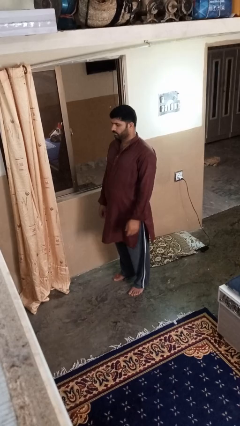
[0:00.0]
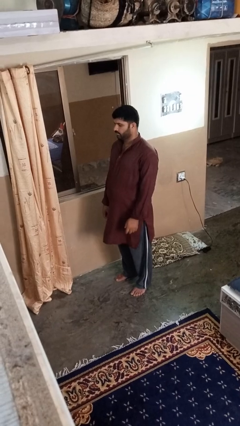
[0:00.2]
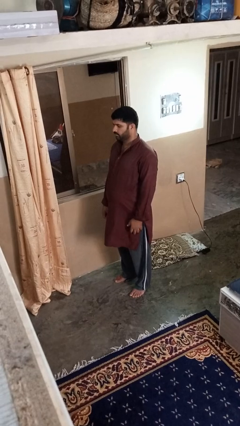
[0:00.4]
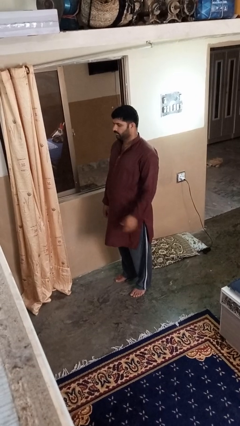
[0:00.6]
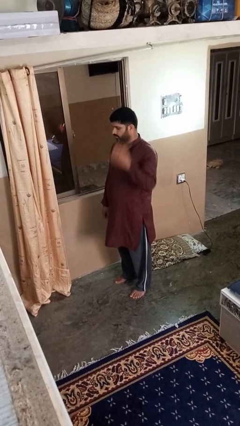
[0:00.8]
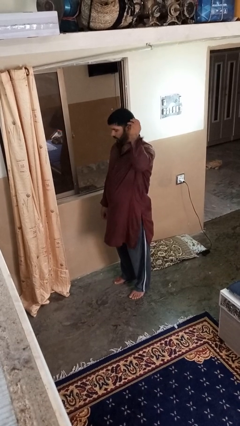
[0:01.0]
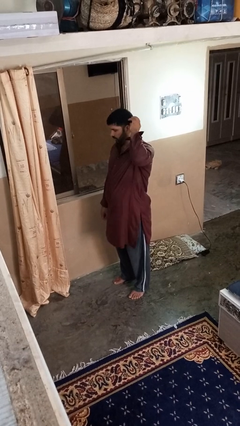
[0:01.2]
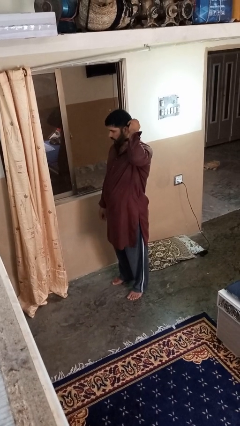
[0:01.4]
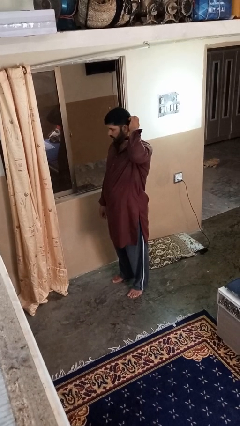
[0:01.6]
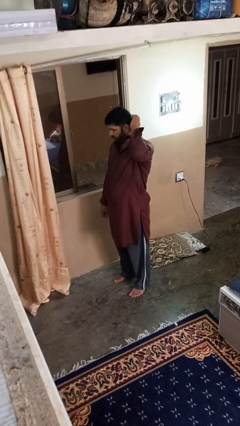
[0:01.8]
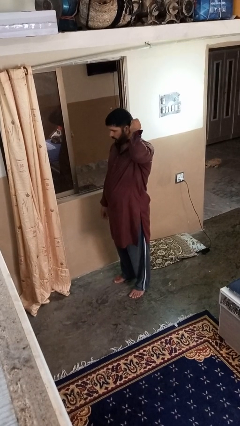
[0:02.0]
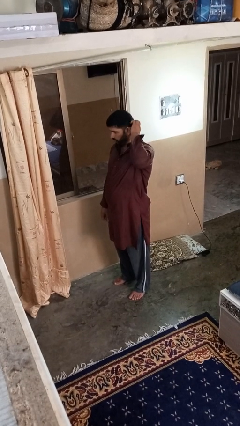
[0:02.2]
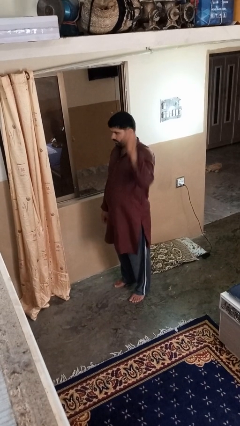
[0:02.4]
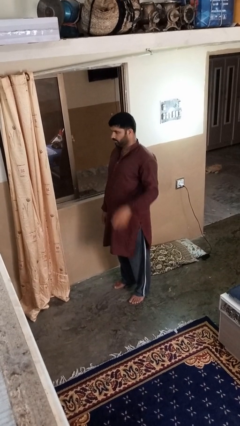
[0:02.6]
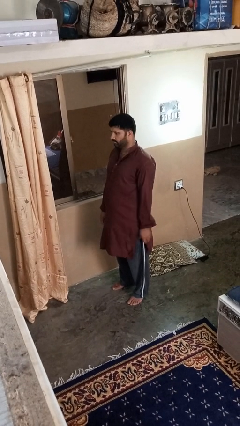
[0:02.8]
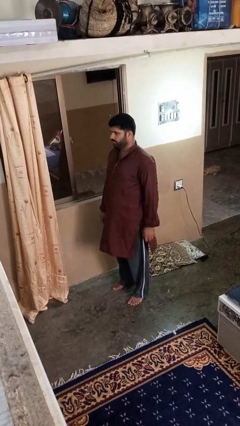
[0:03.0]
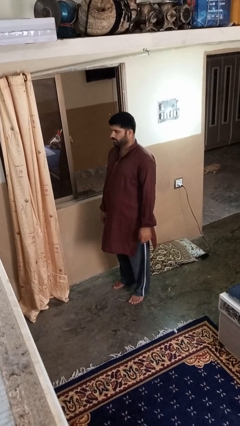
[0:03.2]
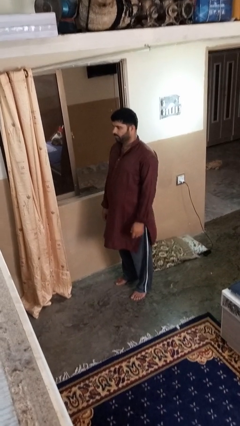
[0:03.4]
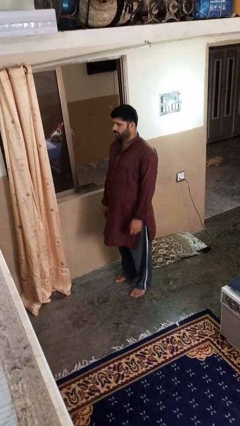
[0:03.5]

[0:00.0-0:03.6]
person strokes hair

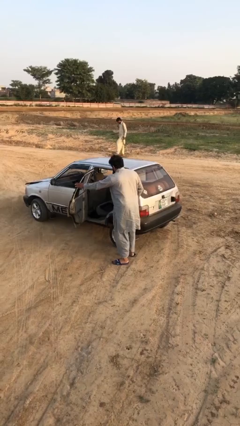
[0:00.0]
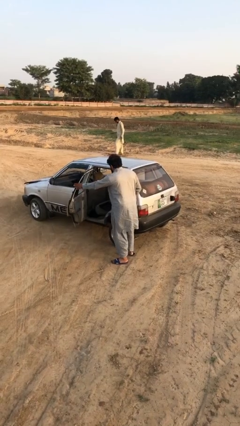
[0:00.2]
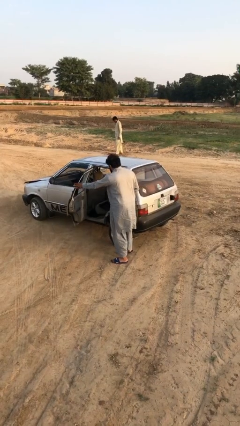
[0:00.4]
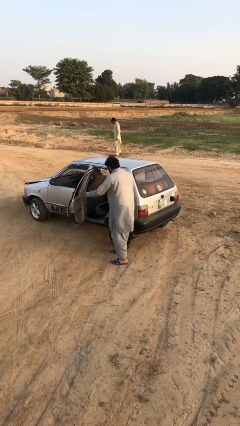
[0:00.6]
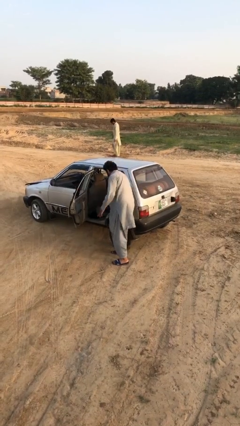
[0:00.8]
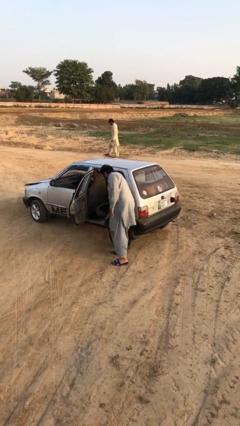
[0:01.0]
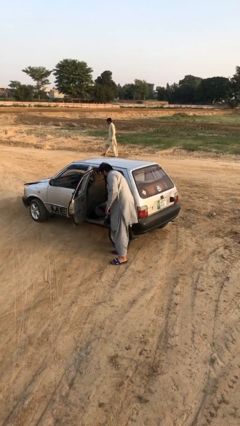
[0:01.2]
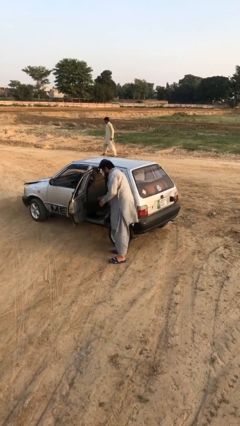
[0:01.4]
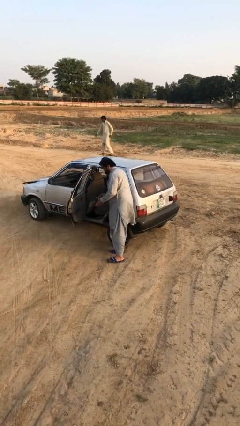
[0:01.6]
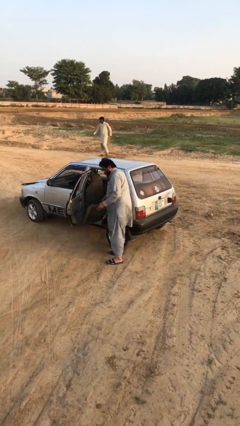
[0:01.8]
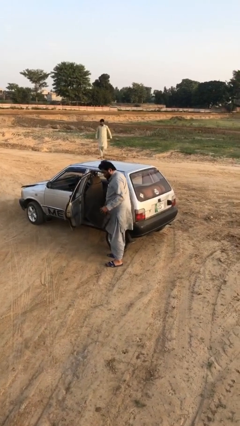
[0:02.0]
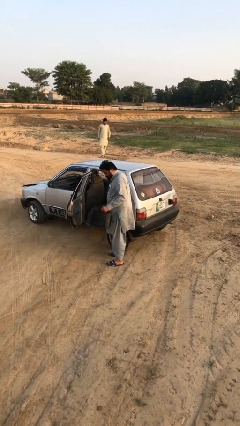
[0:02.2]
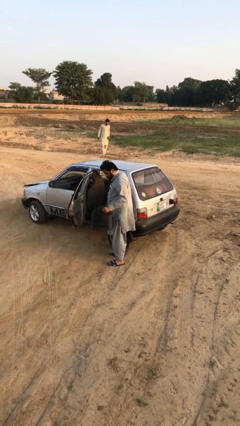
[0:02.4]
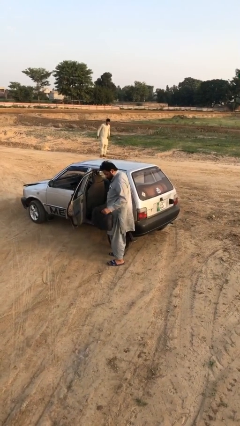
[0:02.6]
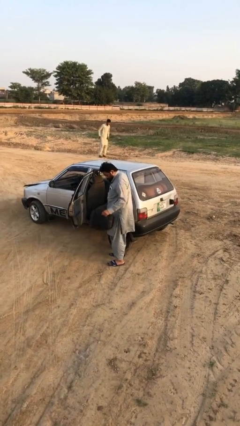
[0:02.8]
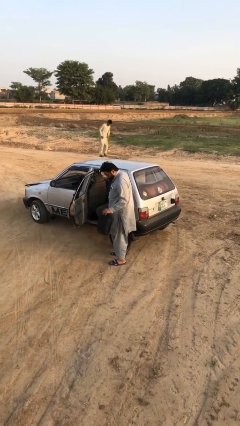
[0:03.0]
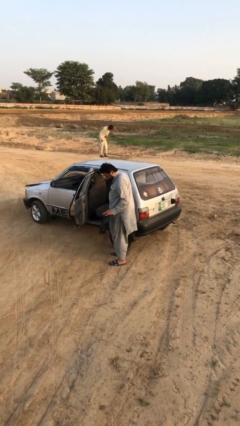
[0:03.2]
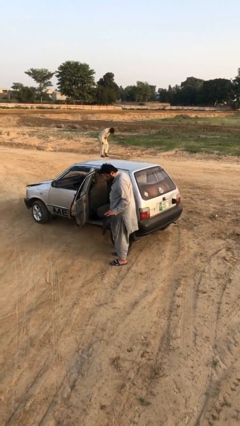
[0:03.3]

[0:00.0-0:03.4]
person unloads car

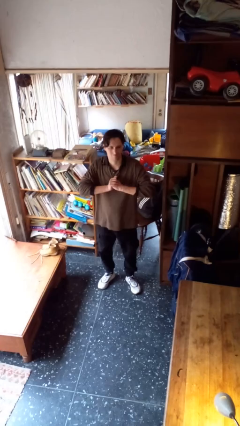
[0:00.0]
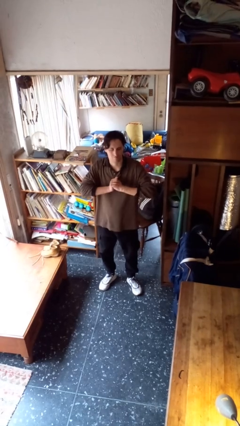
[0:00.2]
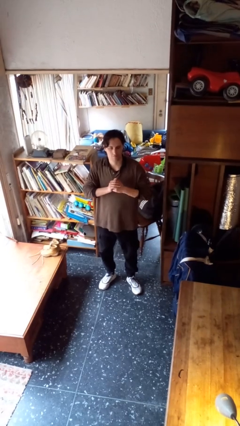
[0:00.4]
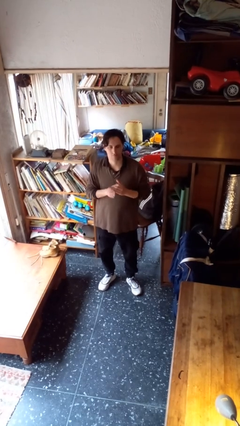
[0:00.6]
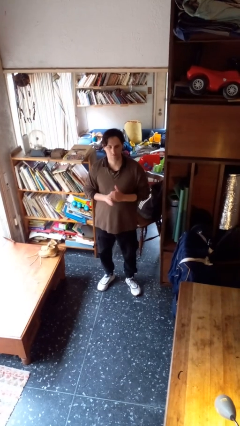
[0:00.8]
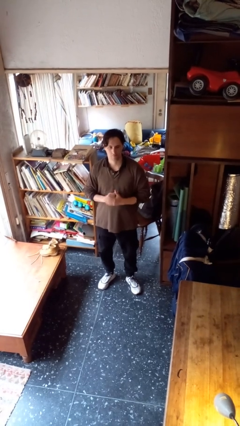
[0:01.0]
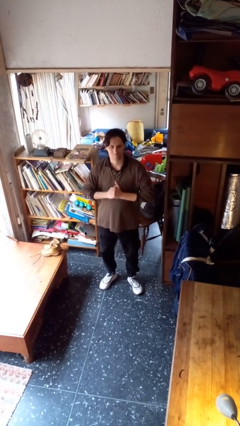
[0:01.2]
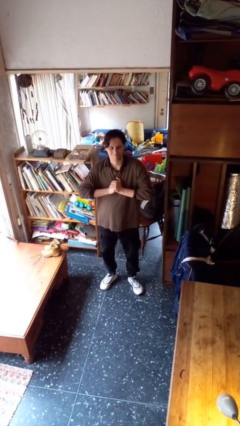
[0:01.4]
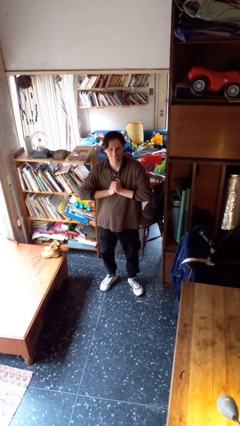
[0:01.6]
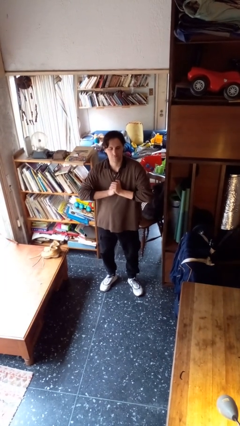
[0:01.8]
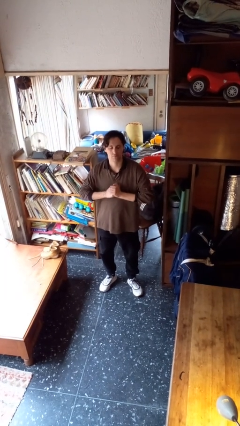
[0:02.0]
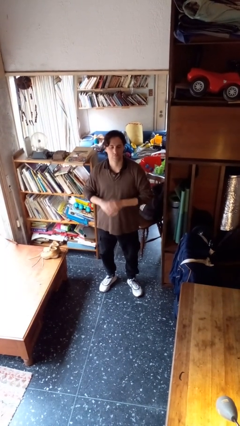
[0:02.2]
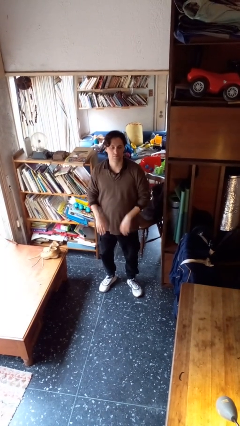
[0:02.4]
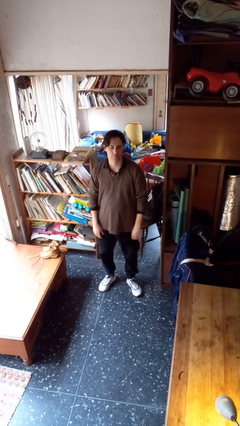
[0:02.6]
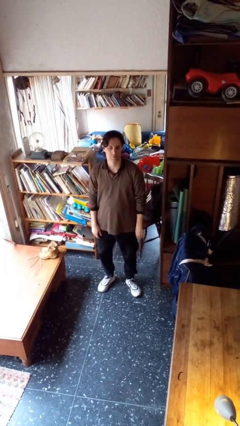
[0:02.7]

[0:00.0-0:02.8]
person cracks knuckles

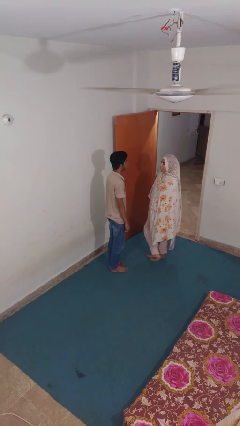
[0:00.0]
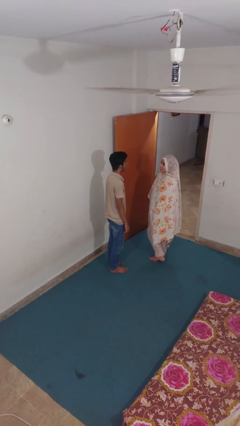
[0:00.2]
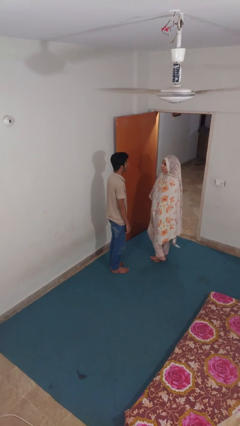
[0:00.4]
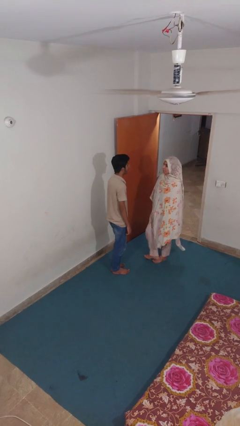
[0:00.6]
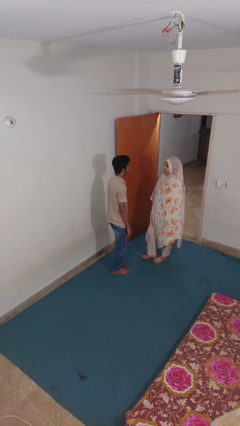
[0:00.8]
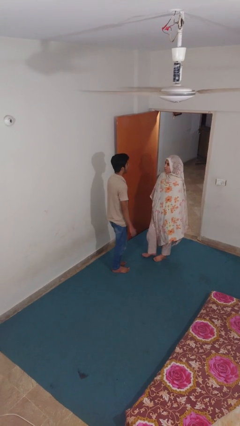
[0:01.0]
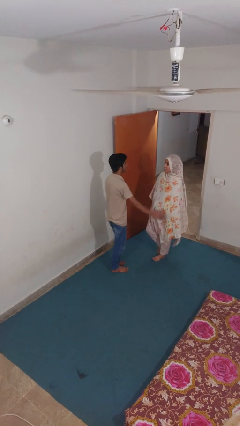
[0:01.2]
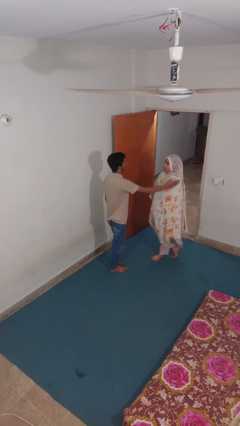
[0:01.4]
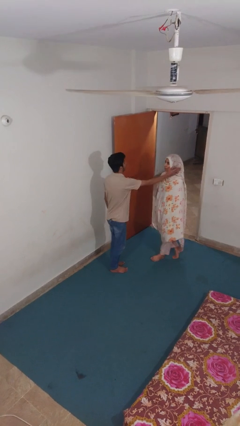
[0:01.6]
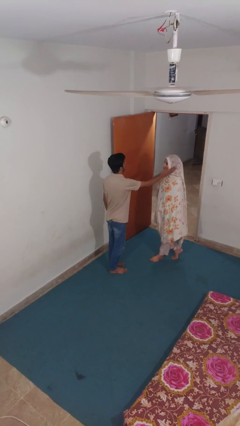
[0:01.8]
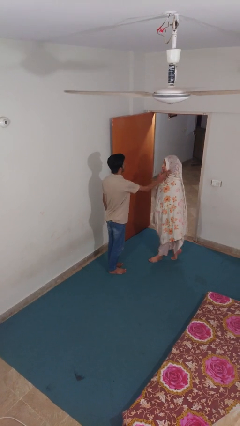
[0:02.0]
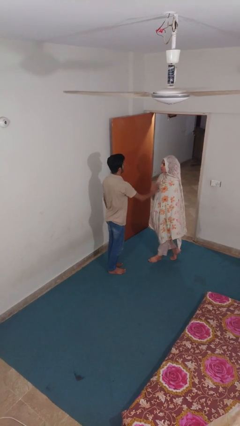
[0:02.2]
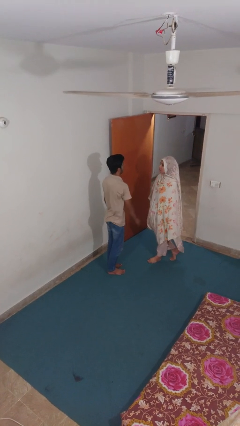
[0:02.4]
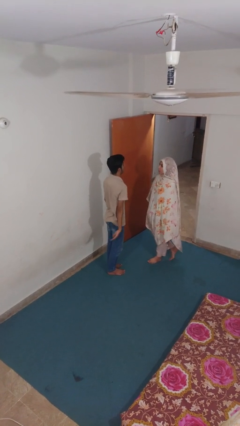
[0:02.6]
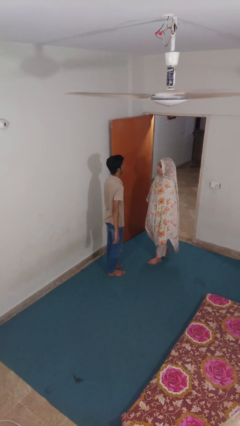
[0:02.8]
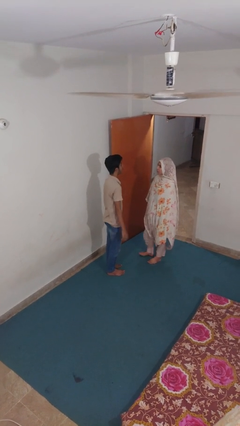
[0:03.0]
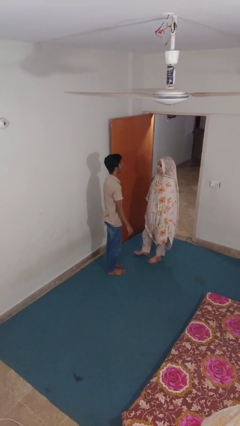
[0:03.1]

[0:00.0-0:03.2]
person touches face of person

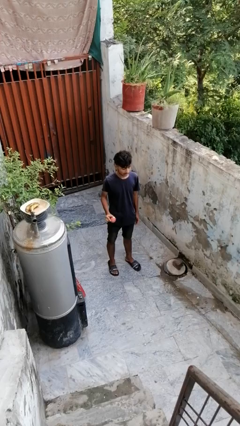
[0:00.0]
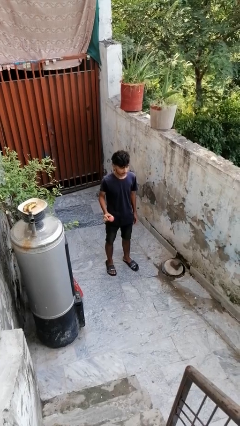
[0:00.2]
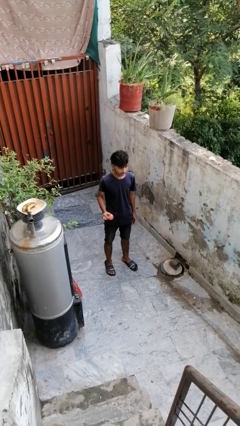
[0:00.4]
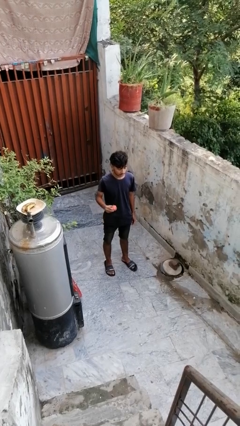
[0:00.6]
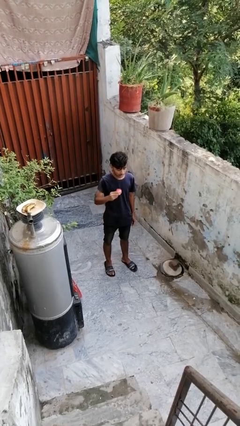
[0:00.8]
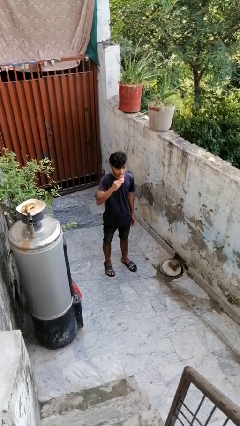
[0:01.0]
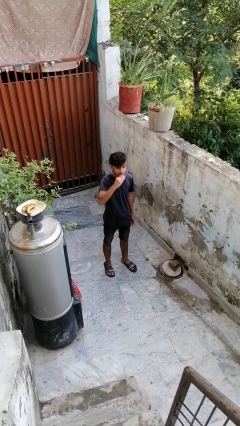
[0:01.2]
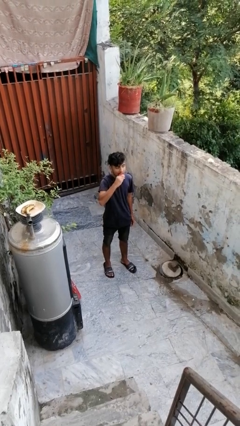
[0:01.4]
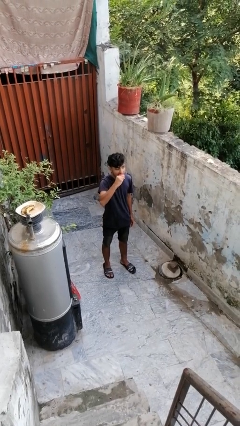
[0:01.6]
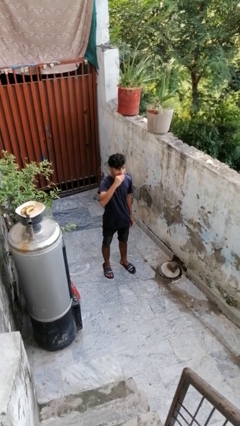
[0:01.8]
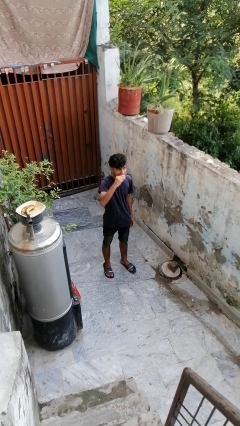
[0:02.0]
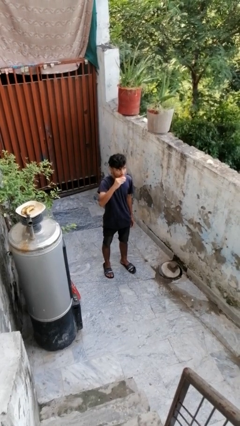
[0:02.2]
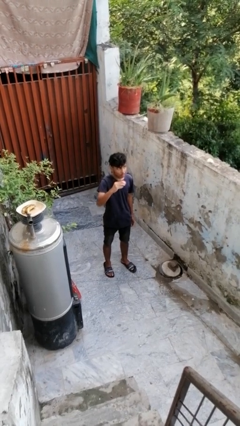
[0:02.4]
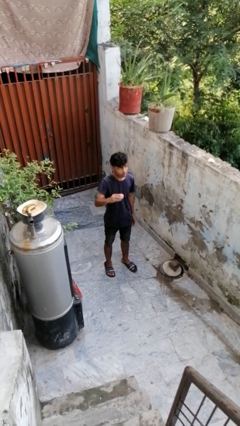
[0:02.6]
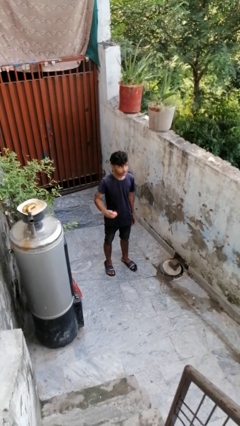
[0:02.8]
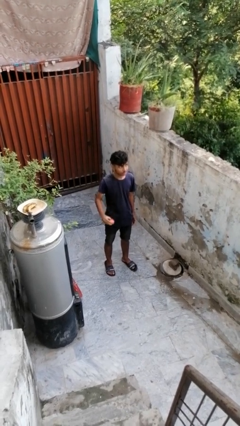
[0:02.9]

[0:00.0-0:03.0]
person eats apple

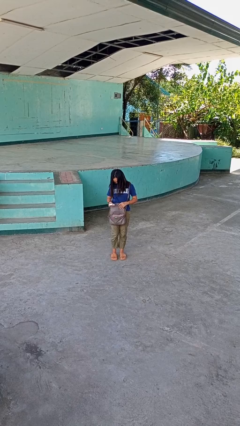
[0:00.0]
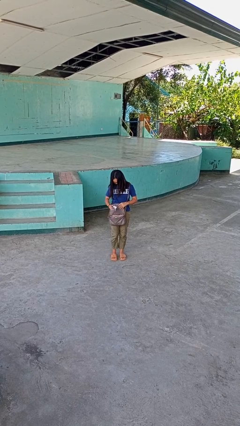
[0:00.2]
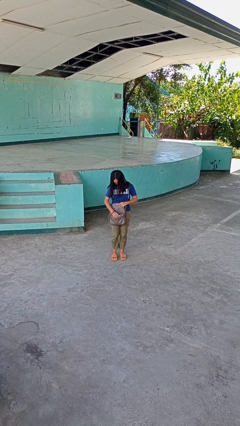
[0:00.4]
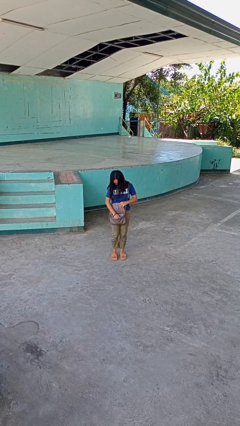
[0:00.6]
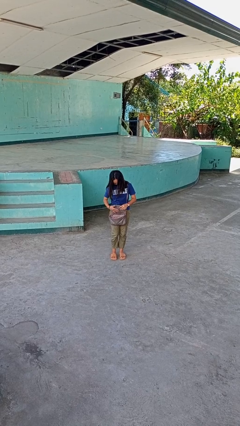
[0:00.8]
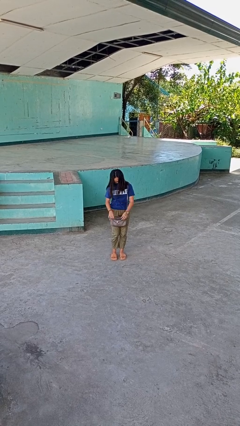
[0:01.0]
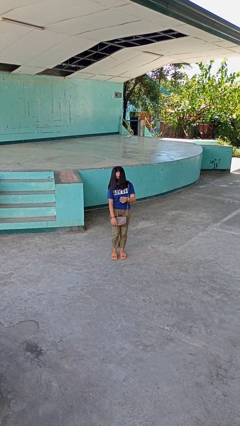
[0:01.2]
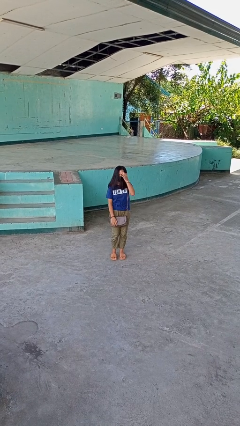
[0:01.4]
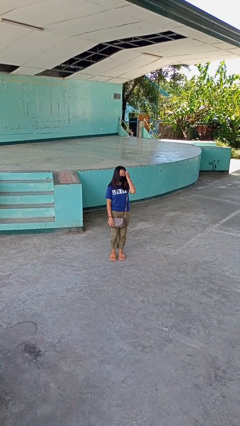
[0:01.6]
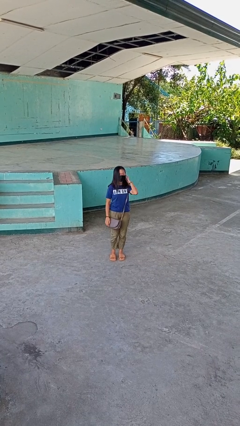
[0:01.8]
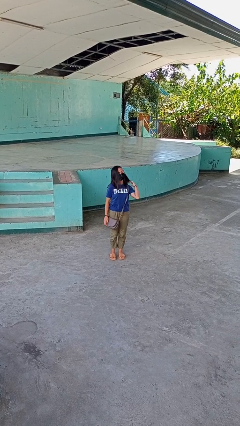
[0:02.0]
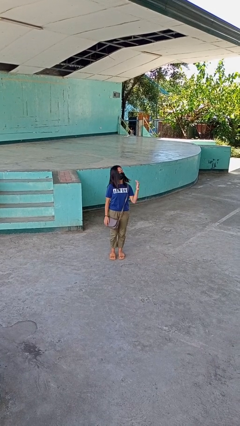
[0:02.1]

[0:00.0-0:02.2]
person puts object into purse
